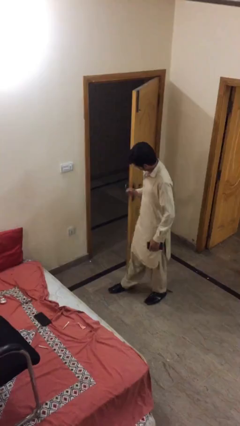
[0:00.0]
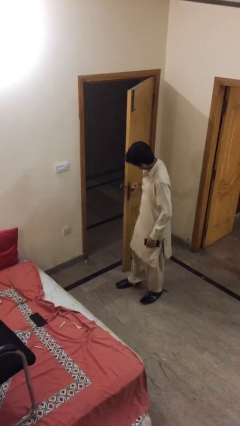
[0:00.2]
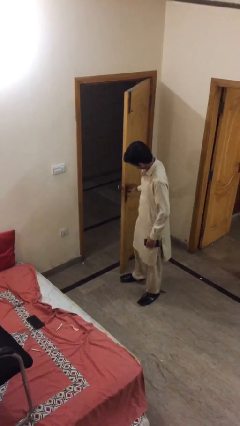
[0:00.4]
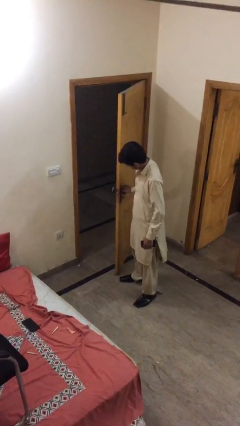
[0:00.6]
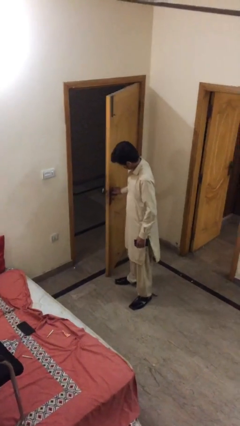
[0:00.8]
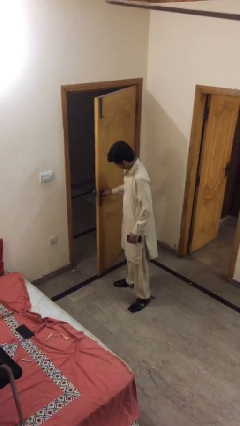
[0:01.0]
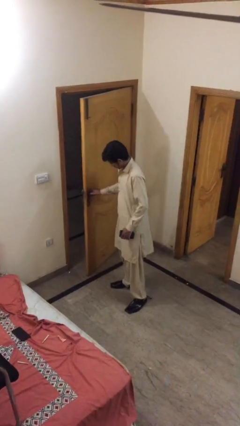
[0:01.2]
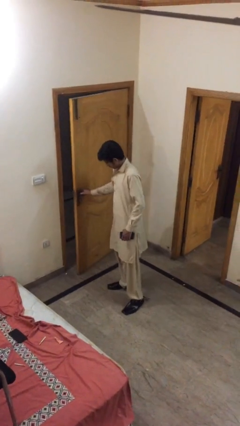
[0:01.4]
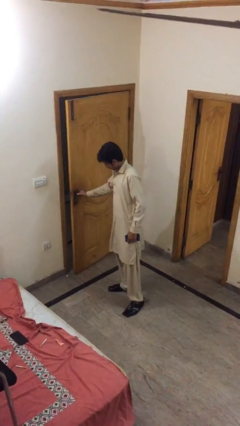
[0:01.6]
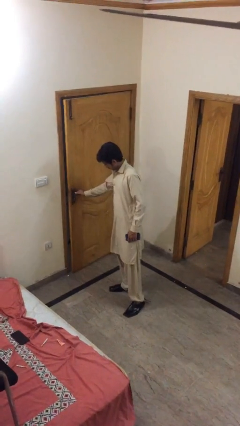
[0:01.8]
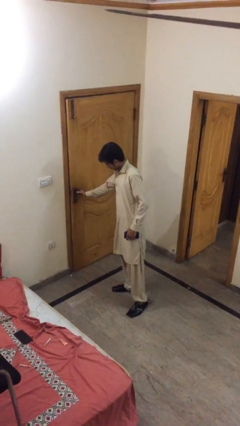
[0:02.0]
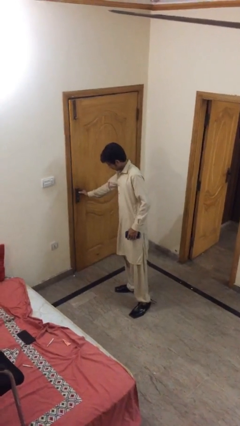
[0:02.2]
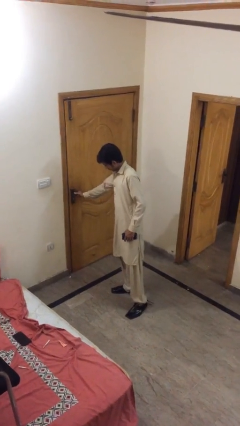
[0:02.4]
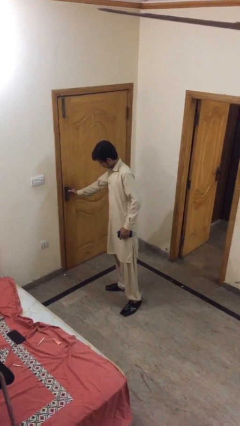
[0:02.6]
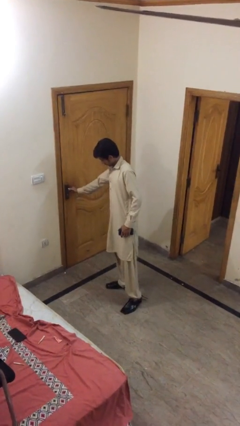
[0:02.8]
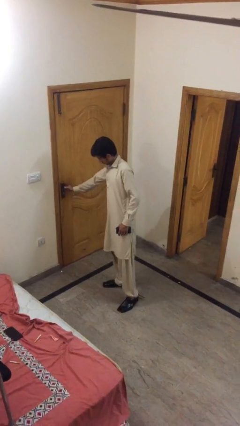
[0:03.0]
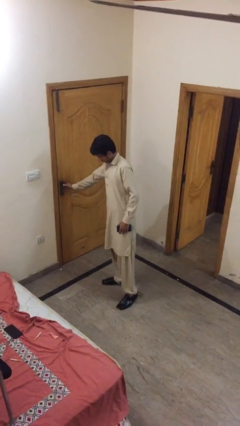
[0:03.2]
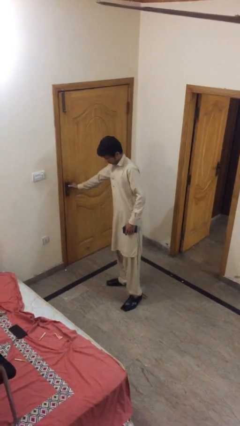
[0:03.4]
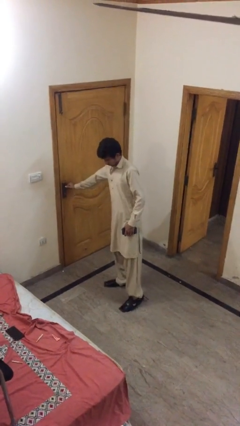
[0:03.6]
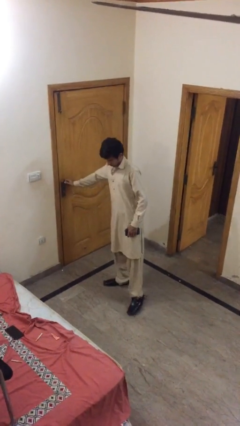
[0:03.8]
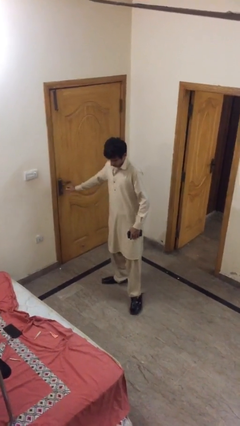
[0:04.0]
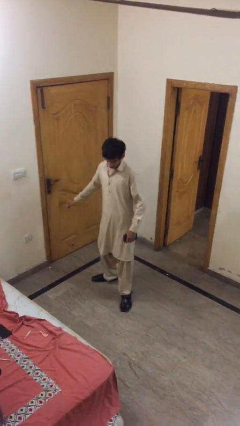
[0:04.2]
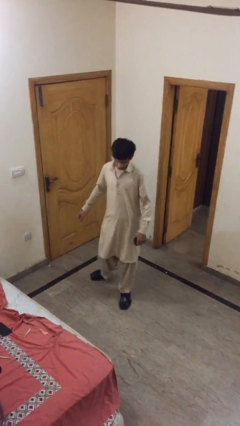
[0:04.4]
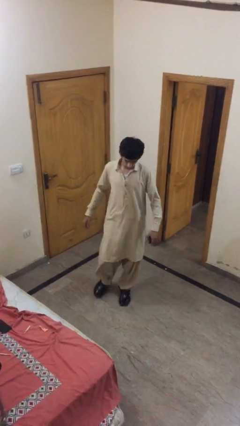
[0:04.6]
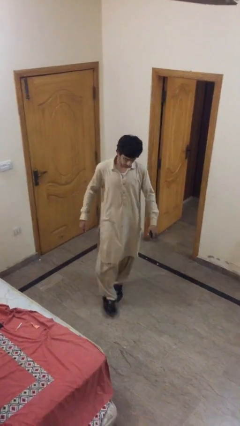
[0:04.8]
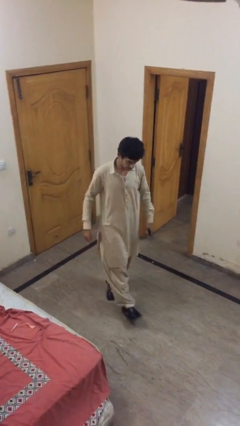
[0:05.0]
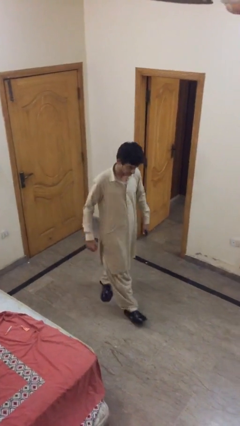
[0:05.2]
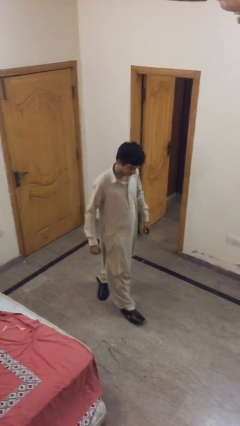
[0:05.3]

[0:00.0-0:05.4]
person closes facility door

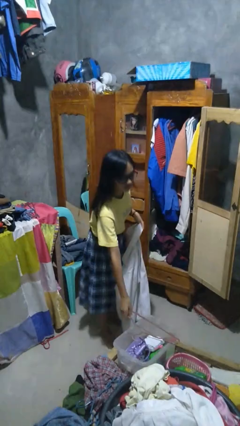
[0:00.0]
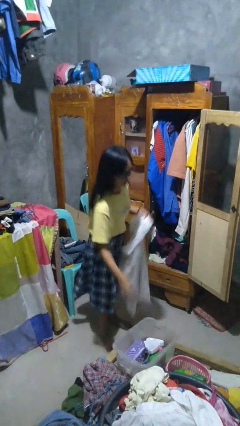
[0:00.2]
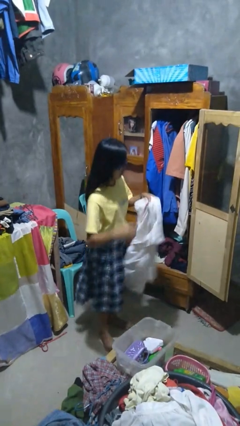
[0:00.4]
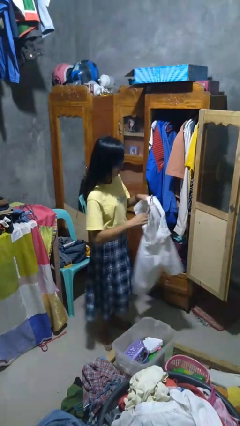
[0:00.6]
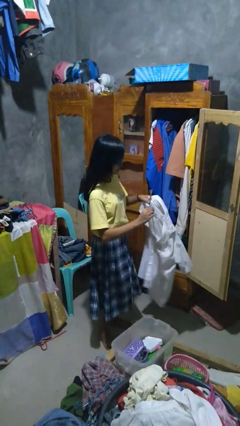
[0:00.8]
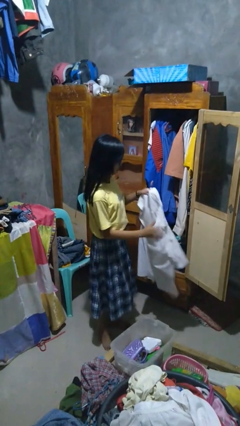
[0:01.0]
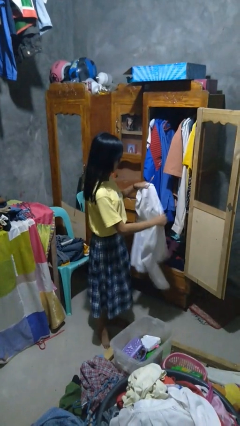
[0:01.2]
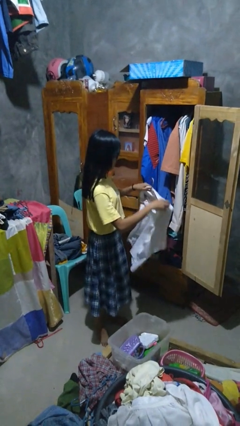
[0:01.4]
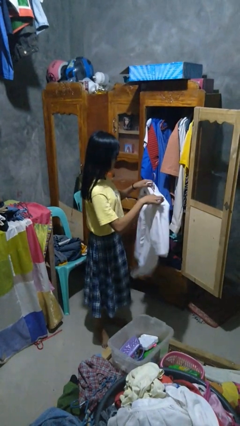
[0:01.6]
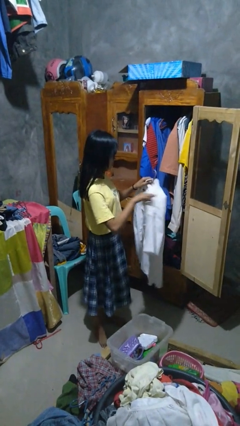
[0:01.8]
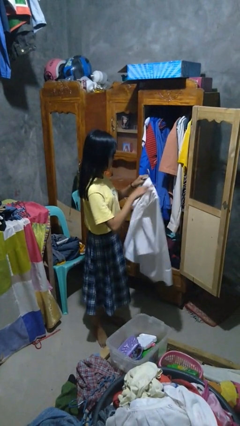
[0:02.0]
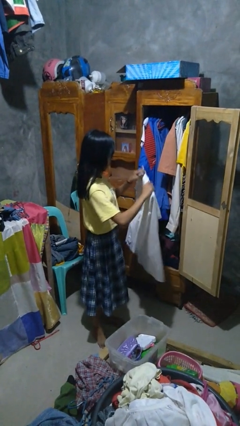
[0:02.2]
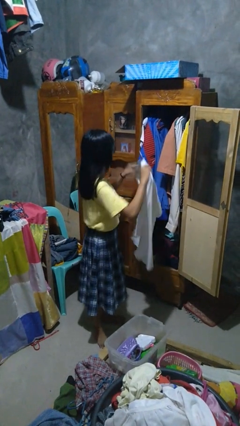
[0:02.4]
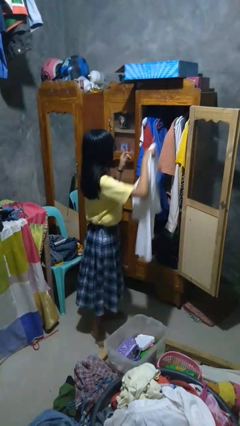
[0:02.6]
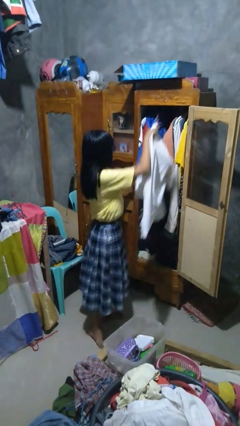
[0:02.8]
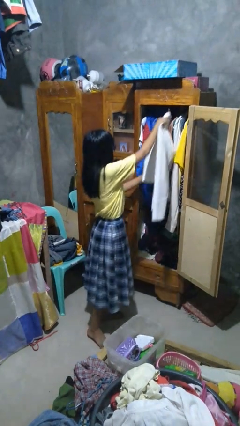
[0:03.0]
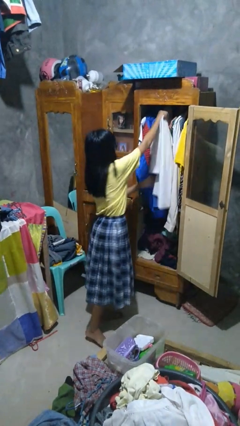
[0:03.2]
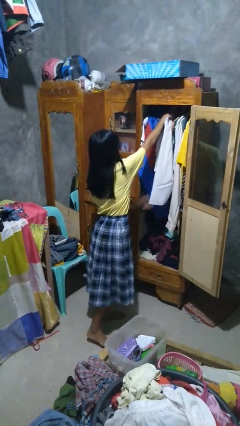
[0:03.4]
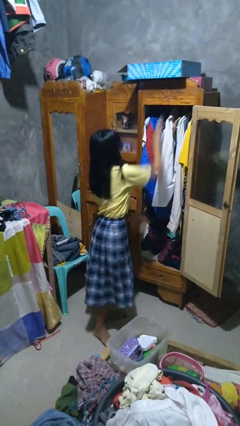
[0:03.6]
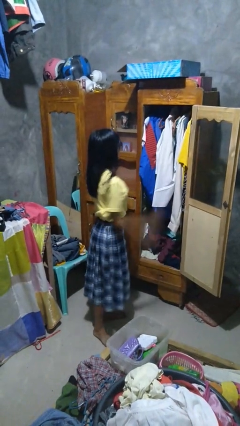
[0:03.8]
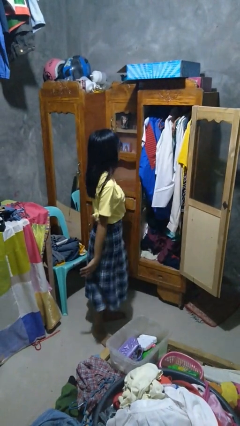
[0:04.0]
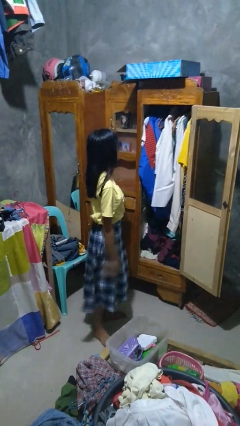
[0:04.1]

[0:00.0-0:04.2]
person puts clothes into closet

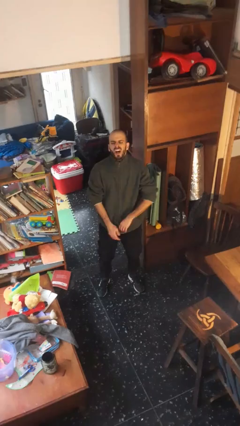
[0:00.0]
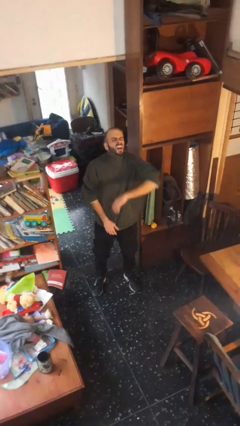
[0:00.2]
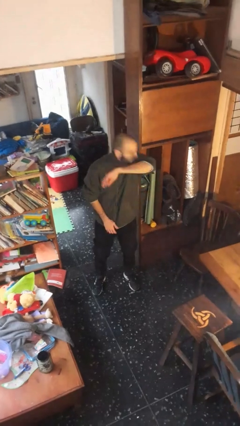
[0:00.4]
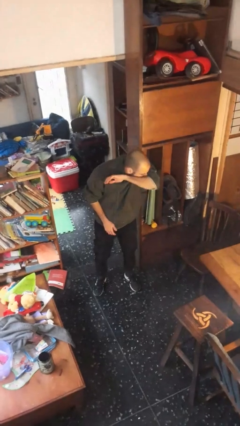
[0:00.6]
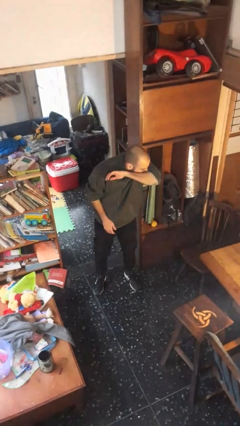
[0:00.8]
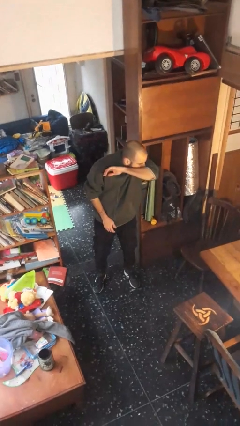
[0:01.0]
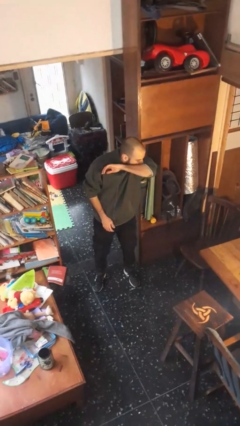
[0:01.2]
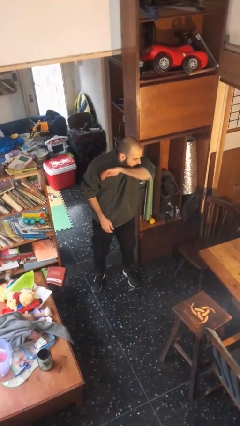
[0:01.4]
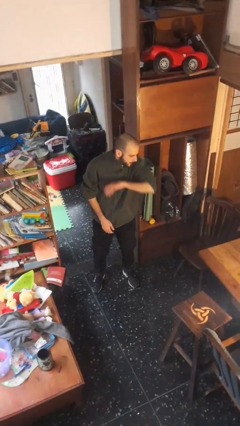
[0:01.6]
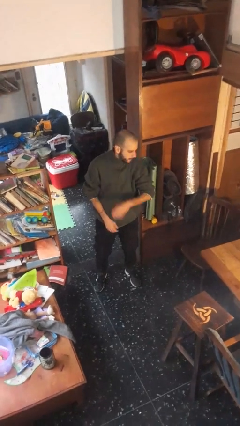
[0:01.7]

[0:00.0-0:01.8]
person sneezes into arm

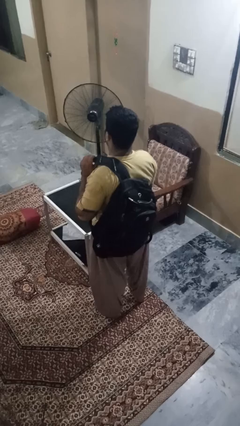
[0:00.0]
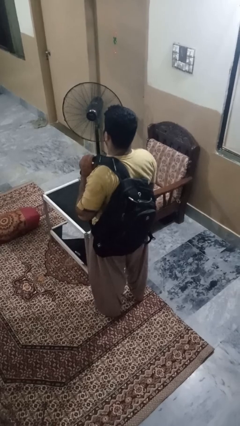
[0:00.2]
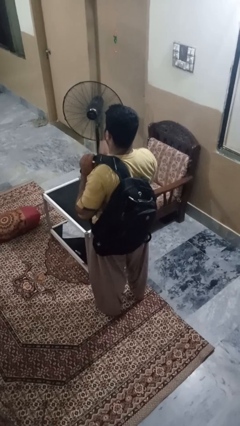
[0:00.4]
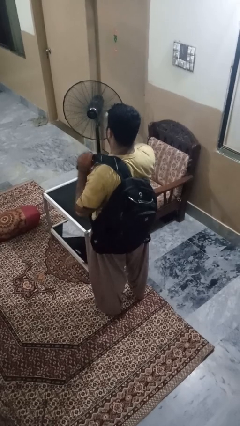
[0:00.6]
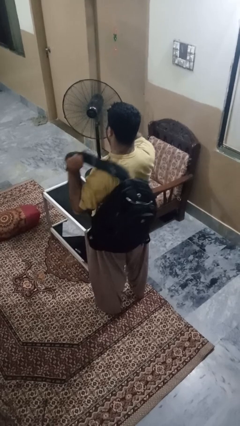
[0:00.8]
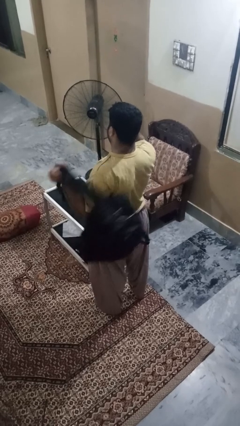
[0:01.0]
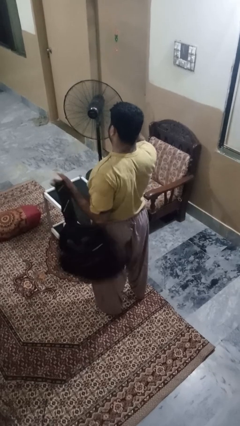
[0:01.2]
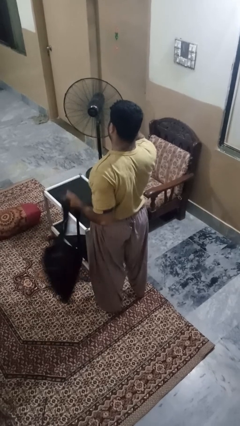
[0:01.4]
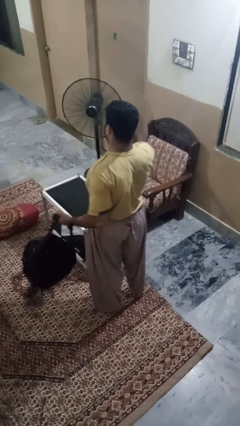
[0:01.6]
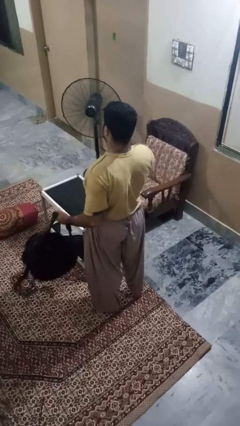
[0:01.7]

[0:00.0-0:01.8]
person takes off backpack

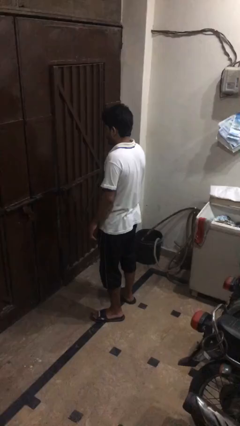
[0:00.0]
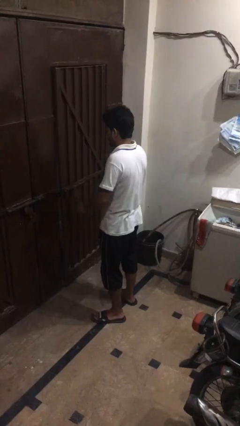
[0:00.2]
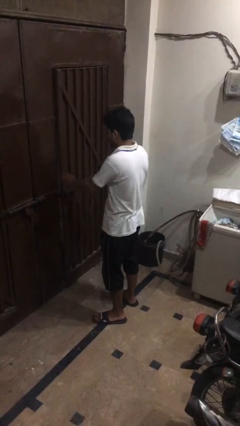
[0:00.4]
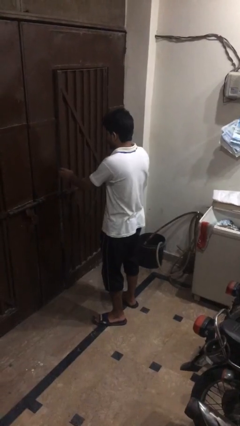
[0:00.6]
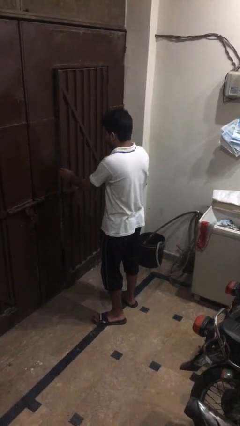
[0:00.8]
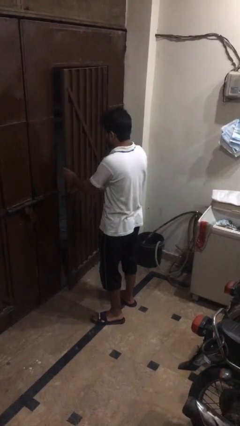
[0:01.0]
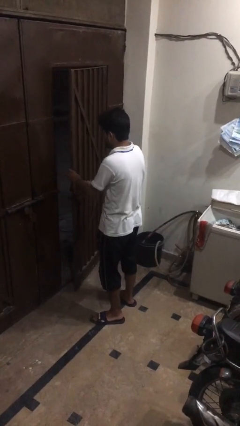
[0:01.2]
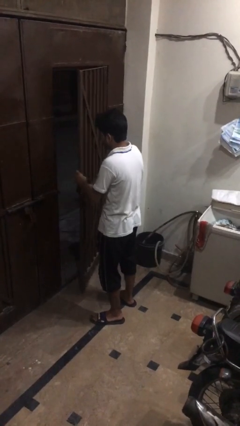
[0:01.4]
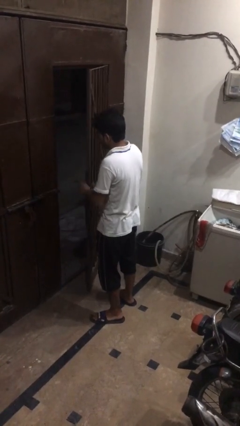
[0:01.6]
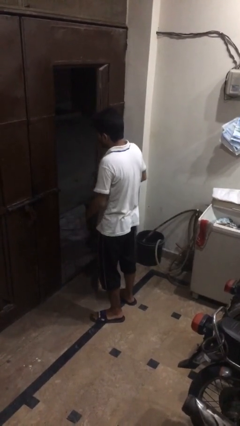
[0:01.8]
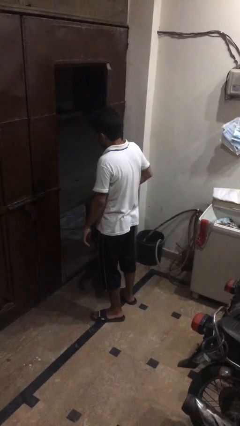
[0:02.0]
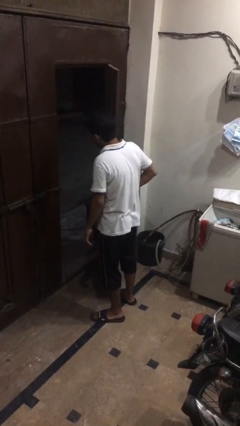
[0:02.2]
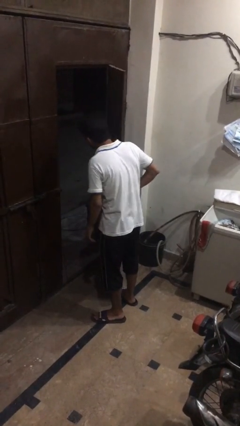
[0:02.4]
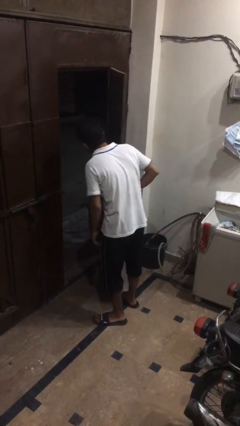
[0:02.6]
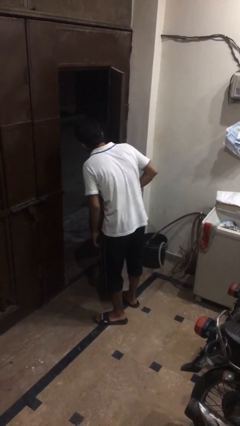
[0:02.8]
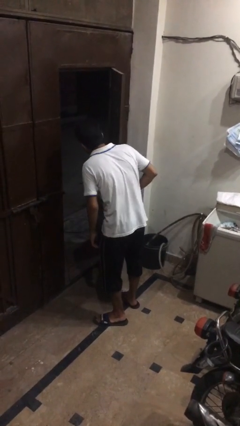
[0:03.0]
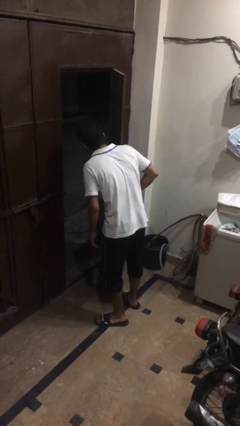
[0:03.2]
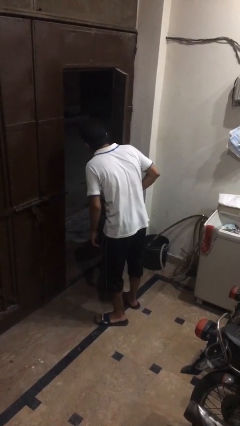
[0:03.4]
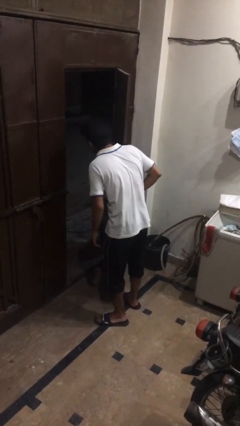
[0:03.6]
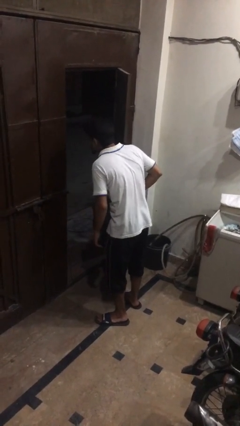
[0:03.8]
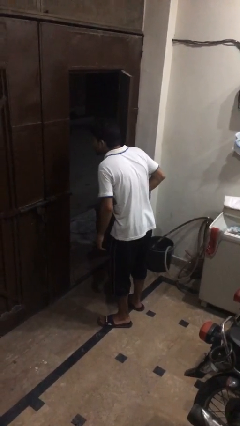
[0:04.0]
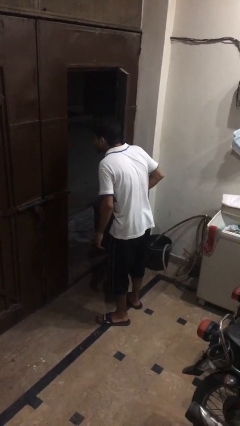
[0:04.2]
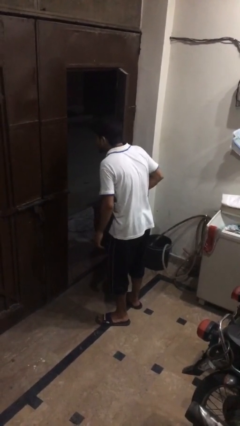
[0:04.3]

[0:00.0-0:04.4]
person opens gate
